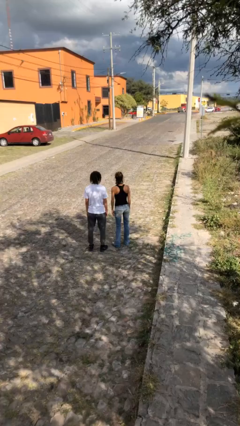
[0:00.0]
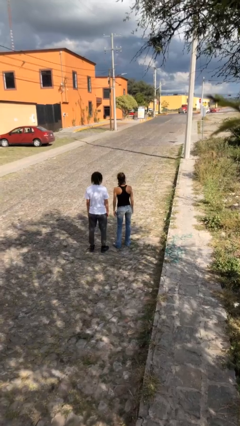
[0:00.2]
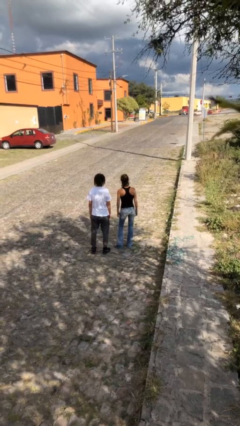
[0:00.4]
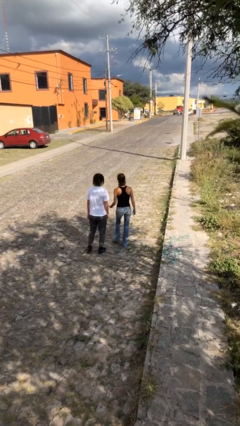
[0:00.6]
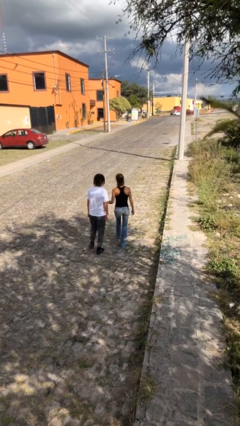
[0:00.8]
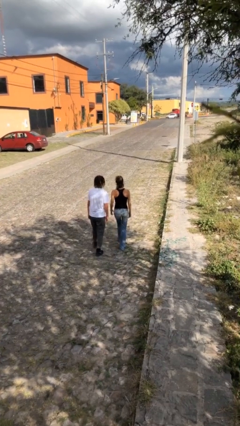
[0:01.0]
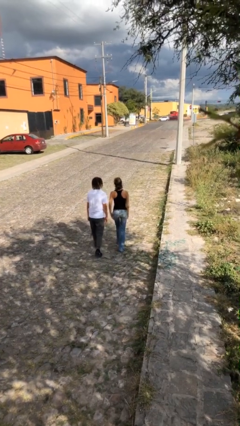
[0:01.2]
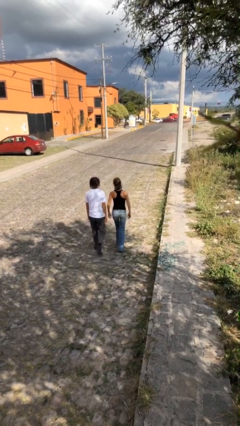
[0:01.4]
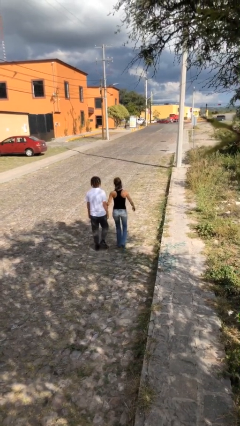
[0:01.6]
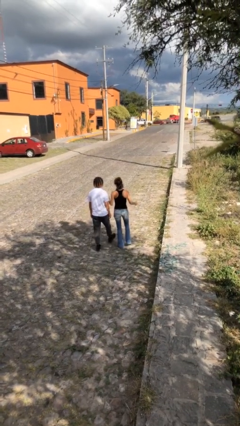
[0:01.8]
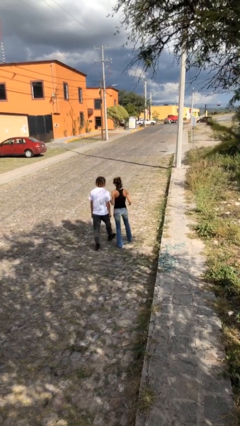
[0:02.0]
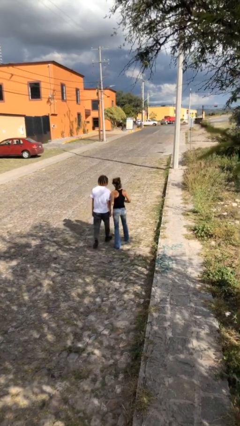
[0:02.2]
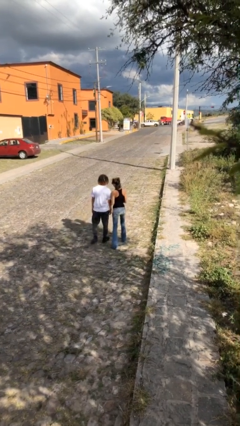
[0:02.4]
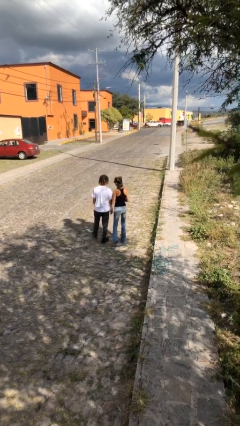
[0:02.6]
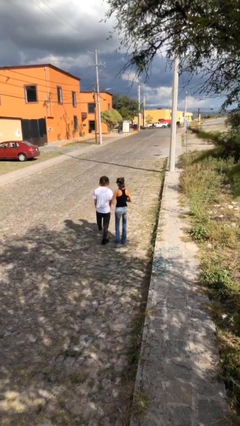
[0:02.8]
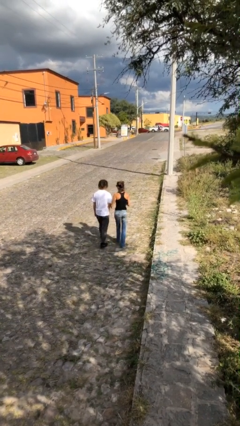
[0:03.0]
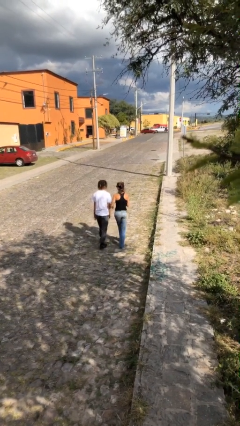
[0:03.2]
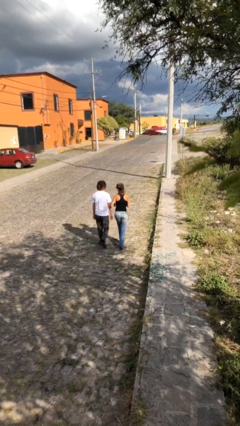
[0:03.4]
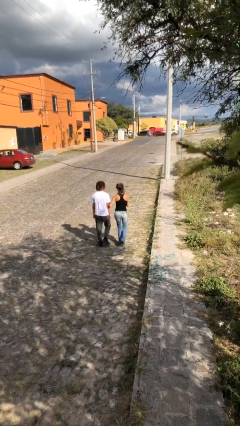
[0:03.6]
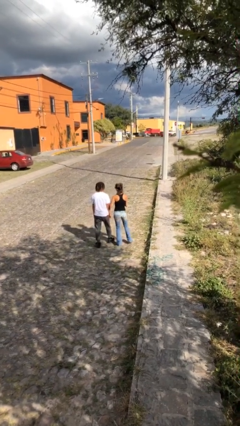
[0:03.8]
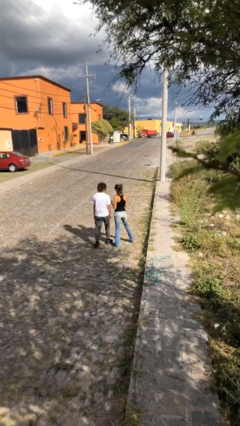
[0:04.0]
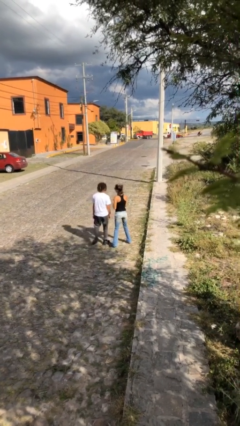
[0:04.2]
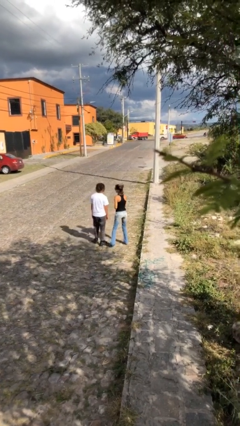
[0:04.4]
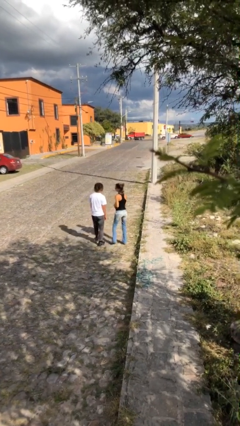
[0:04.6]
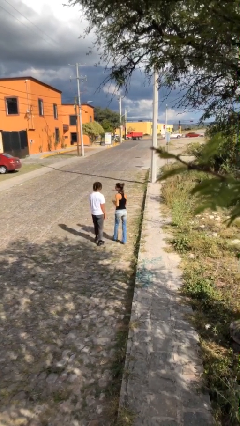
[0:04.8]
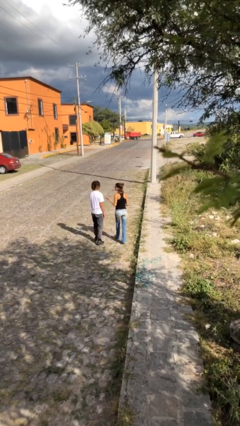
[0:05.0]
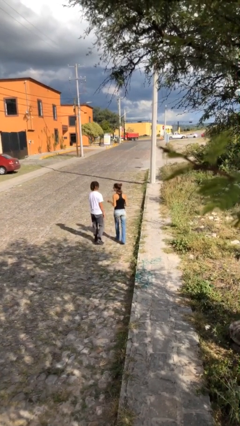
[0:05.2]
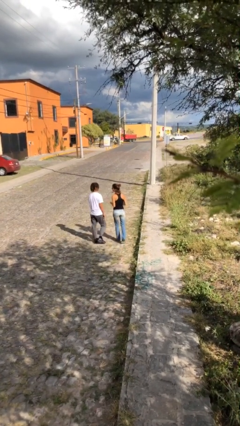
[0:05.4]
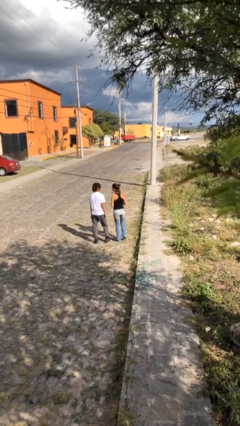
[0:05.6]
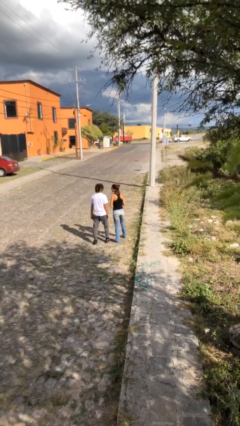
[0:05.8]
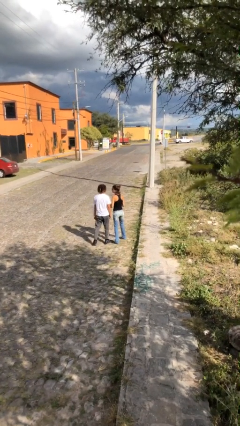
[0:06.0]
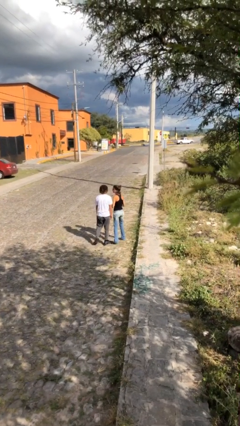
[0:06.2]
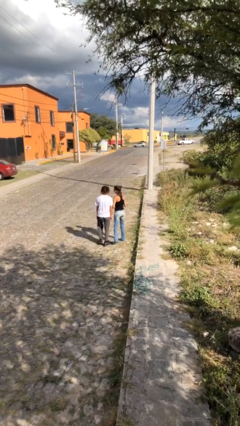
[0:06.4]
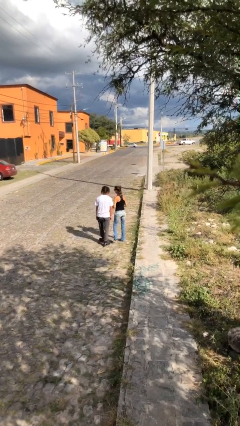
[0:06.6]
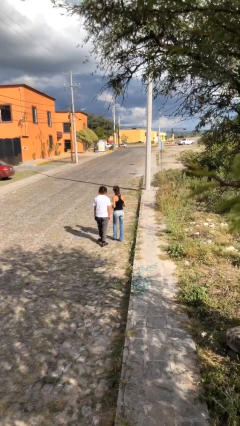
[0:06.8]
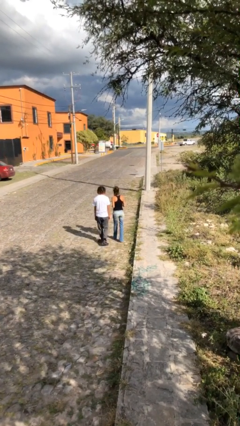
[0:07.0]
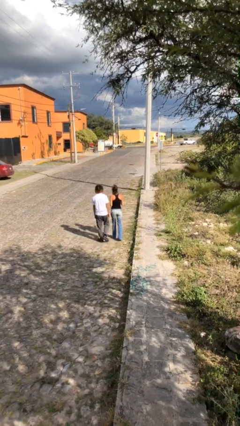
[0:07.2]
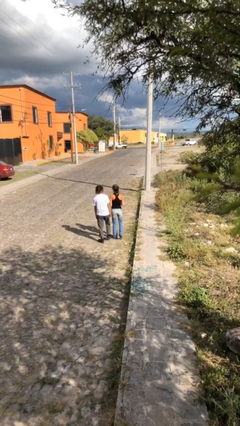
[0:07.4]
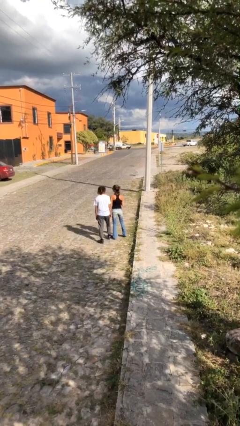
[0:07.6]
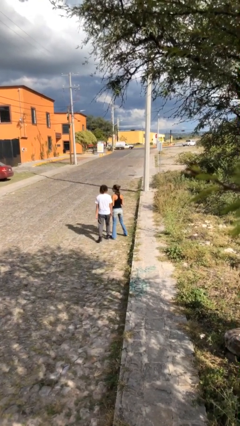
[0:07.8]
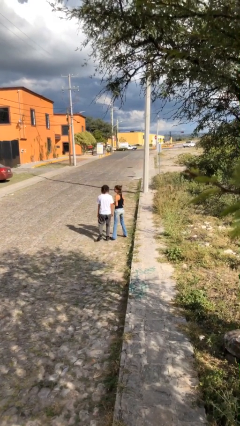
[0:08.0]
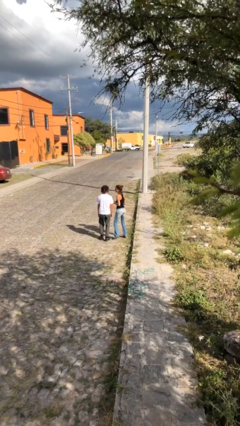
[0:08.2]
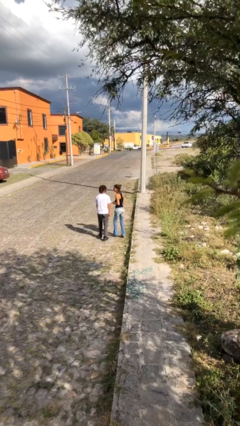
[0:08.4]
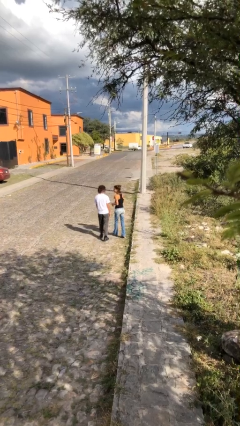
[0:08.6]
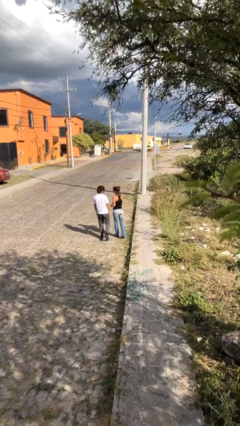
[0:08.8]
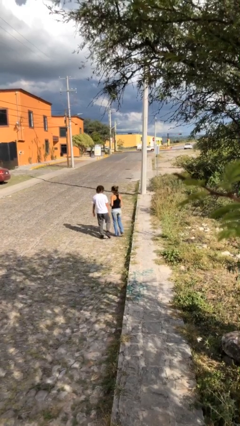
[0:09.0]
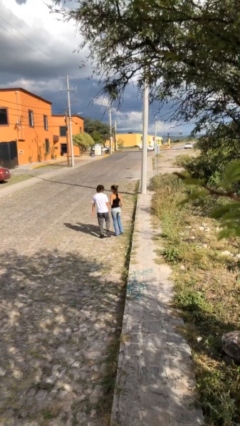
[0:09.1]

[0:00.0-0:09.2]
person talks to person

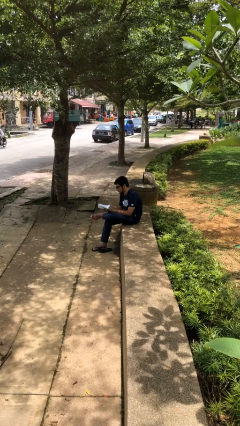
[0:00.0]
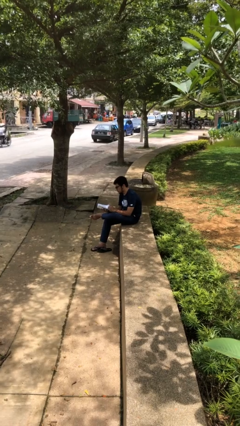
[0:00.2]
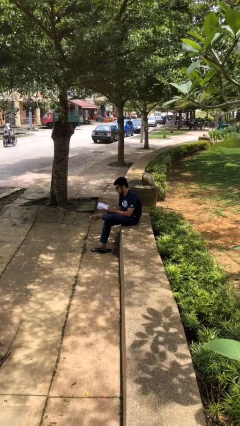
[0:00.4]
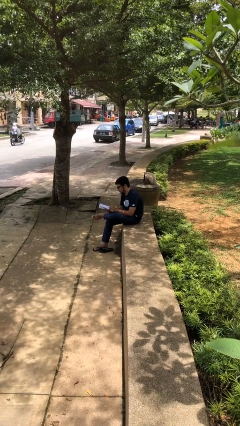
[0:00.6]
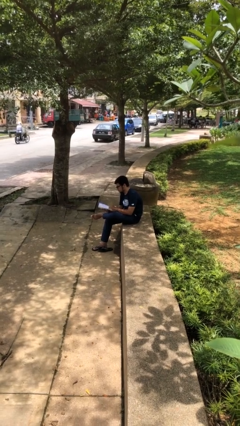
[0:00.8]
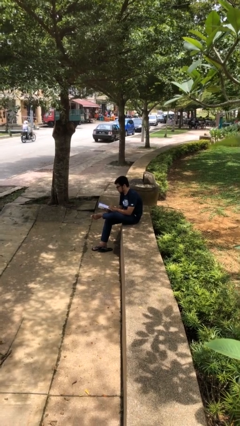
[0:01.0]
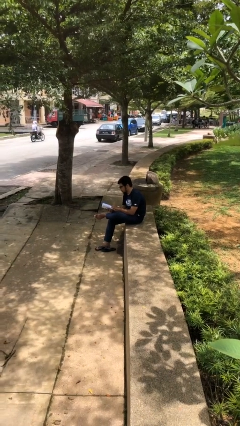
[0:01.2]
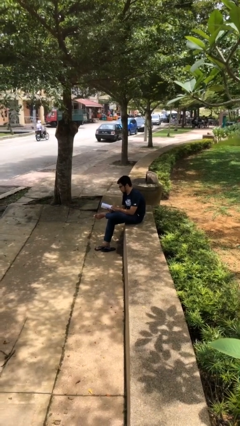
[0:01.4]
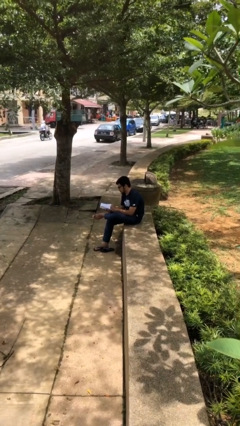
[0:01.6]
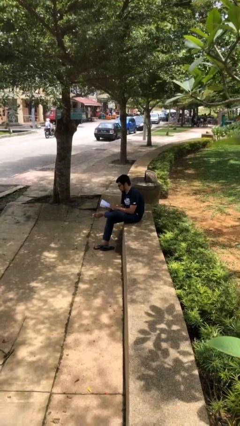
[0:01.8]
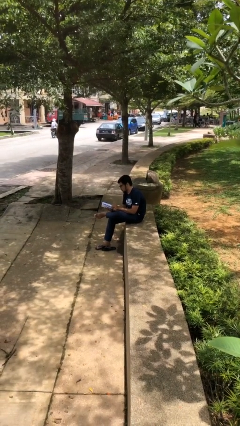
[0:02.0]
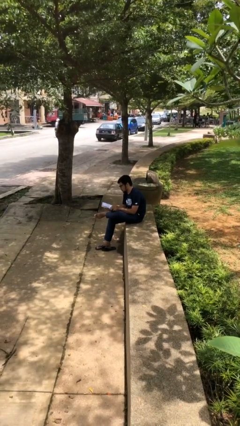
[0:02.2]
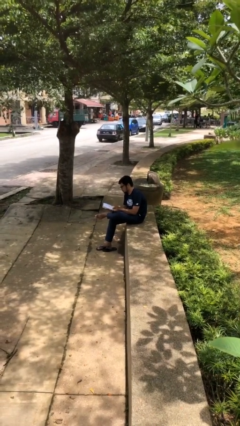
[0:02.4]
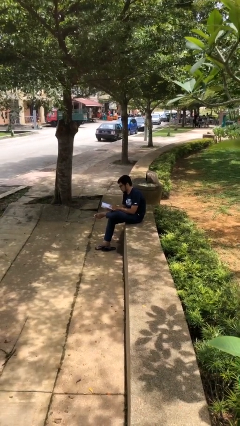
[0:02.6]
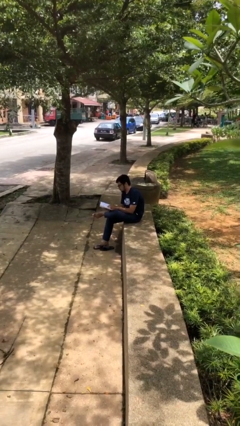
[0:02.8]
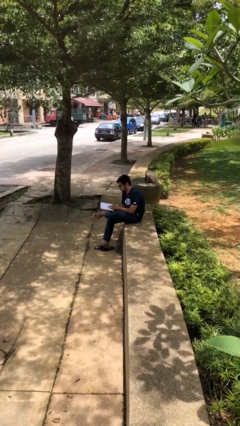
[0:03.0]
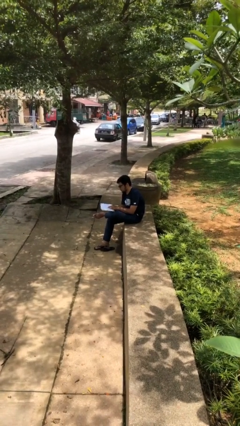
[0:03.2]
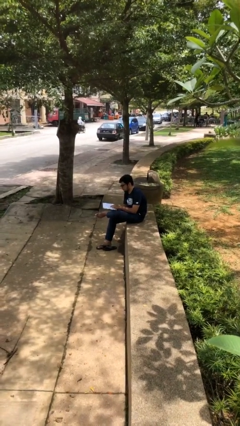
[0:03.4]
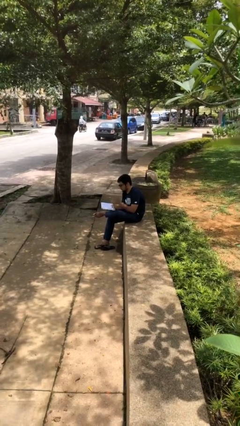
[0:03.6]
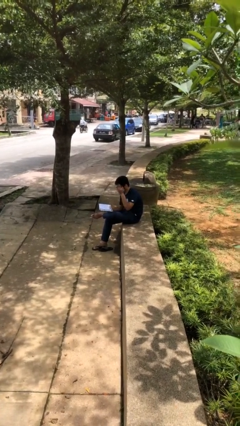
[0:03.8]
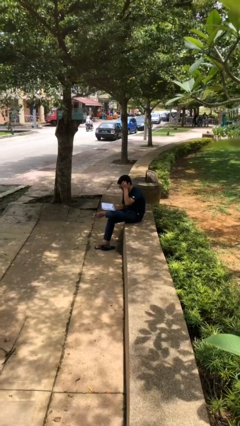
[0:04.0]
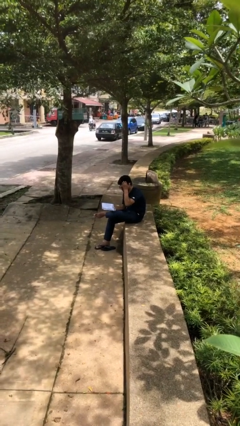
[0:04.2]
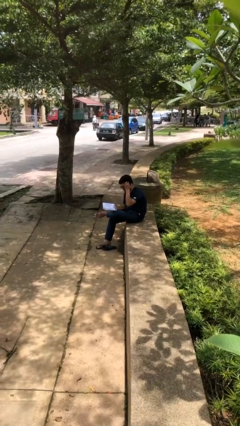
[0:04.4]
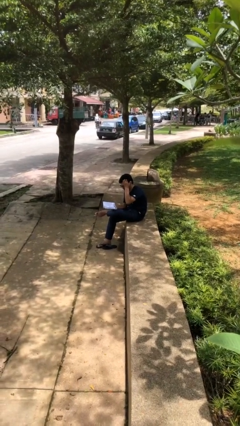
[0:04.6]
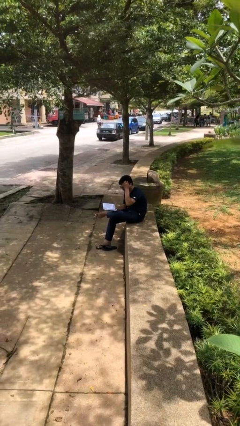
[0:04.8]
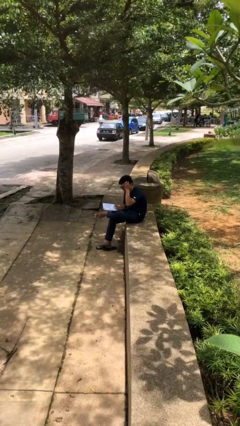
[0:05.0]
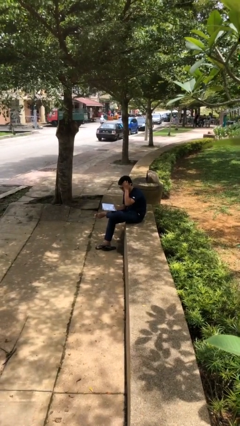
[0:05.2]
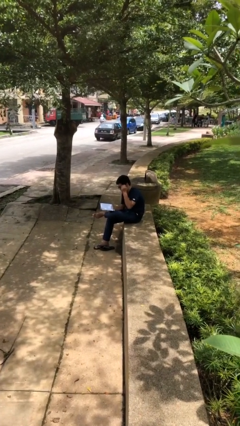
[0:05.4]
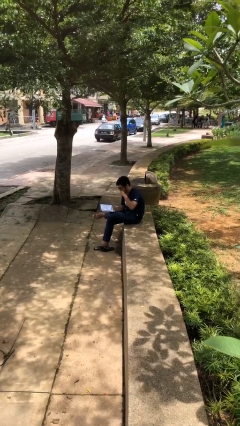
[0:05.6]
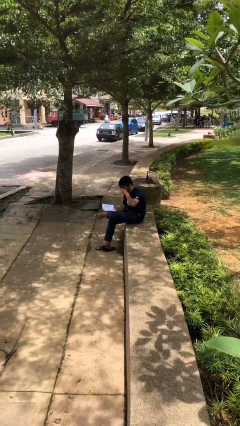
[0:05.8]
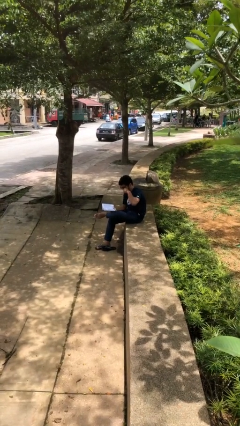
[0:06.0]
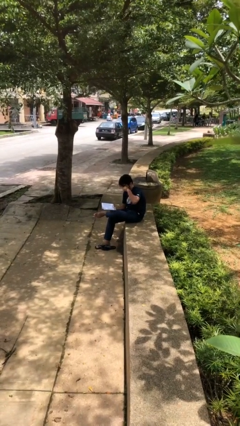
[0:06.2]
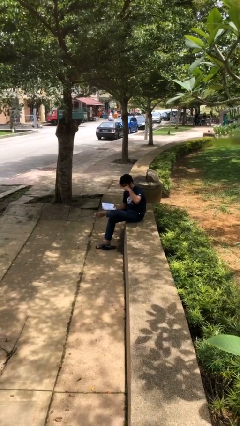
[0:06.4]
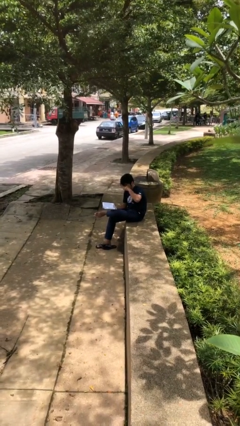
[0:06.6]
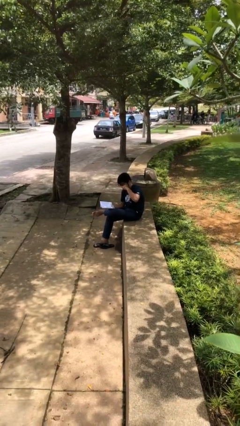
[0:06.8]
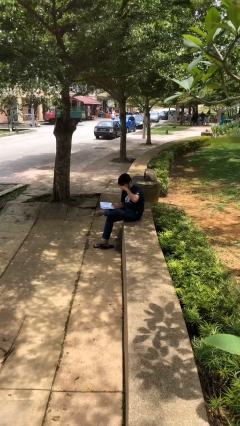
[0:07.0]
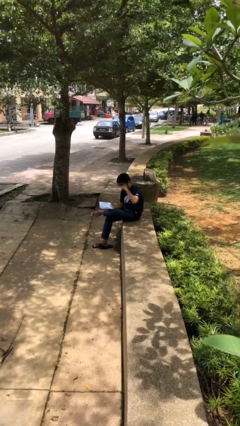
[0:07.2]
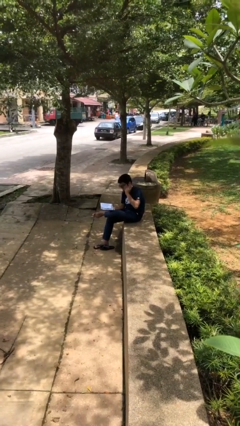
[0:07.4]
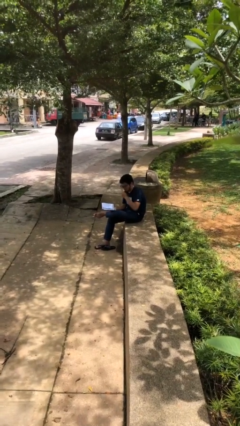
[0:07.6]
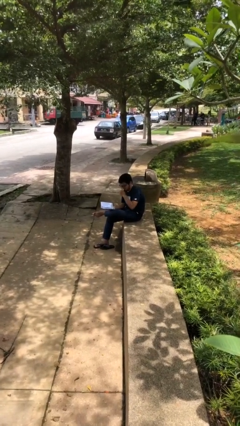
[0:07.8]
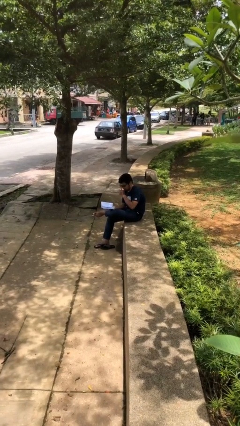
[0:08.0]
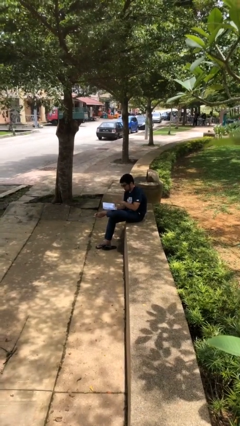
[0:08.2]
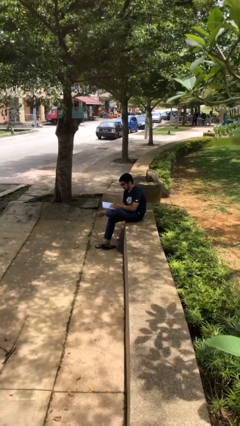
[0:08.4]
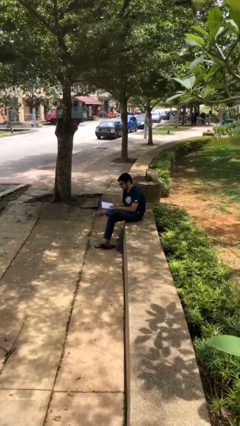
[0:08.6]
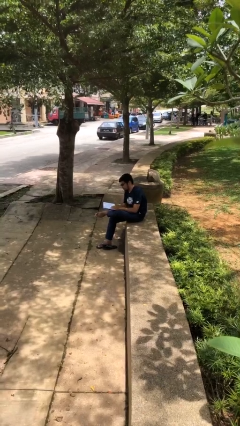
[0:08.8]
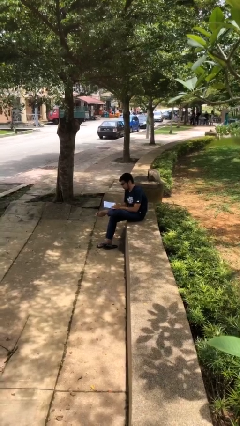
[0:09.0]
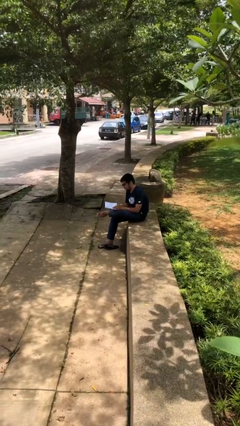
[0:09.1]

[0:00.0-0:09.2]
person reads document
